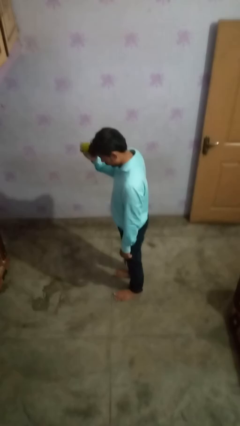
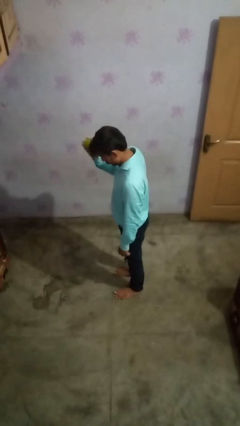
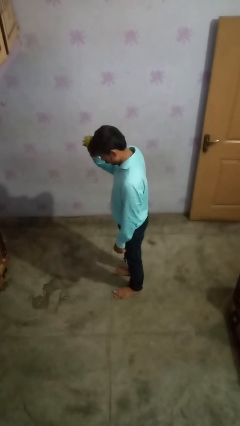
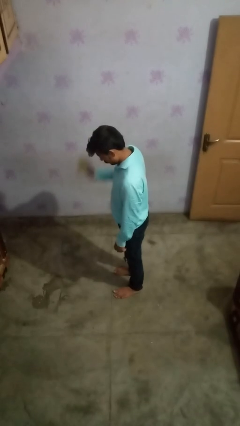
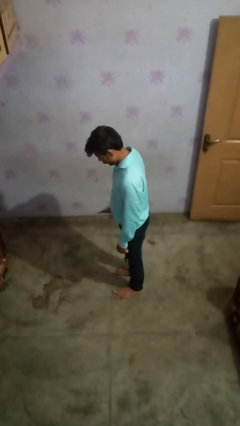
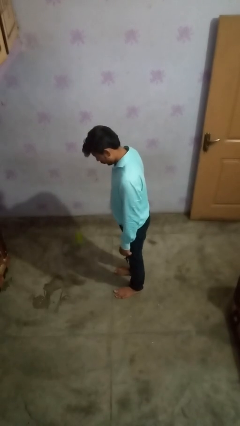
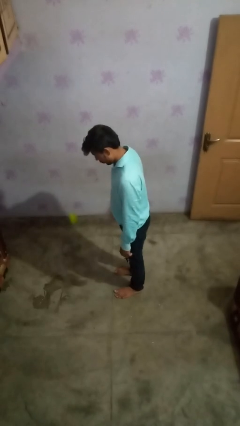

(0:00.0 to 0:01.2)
person bounces ball on floor

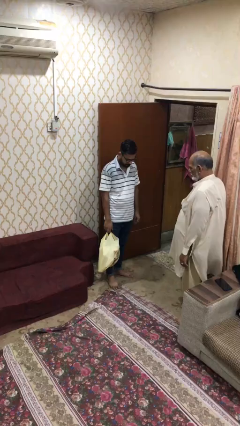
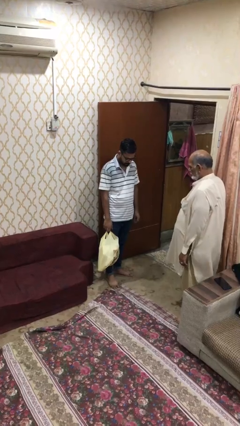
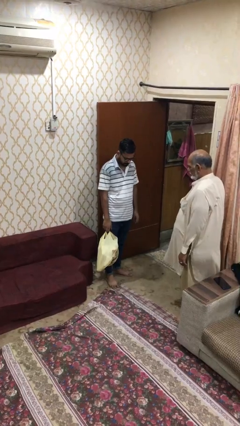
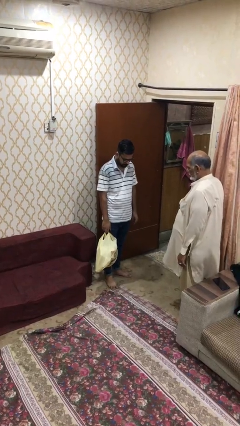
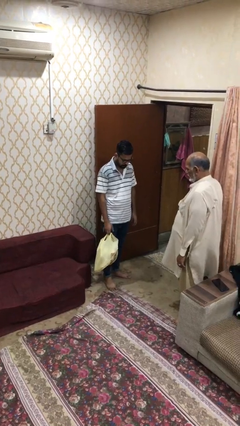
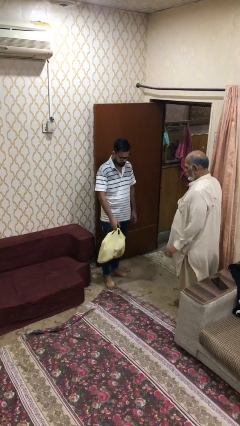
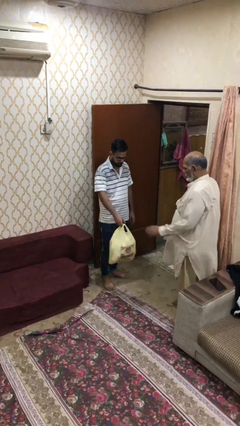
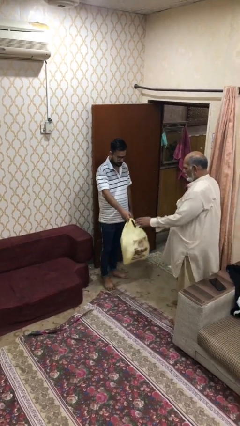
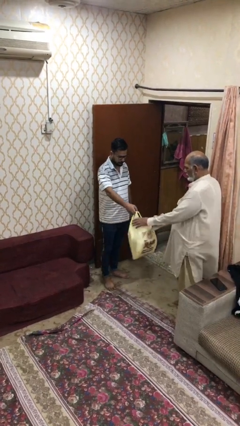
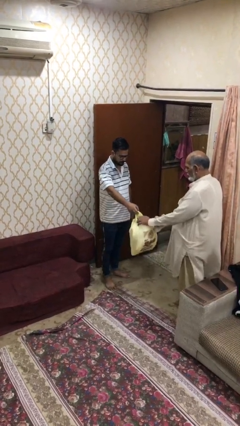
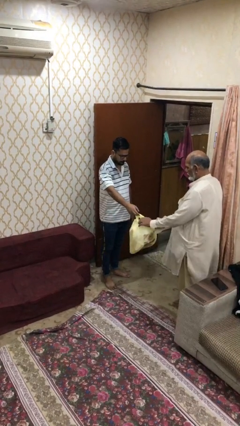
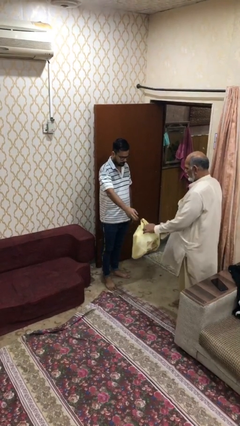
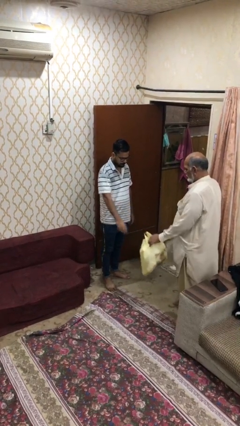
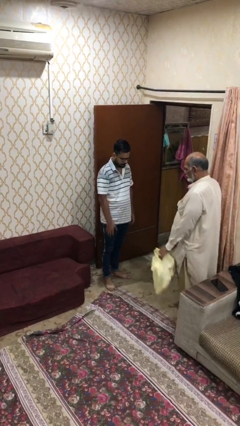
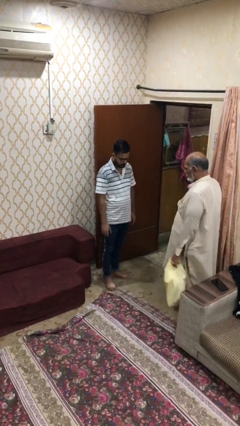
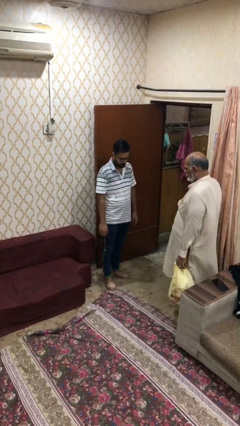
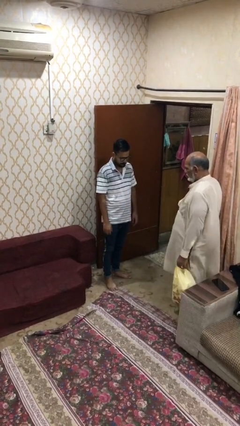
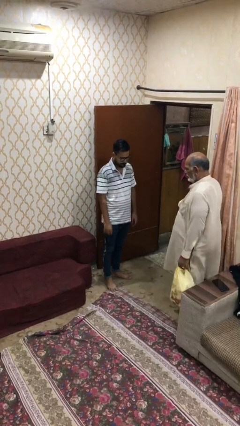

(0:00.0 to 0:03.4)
person transfers object to person

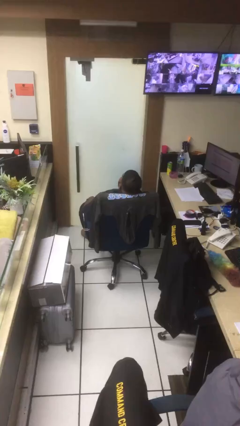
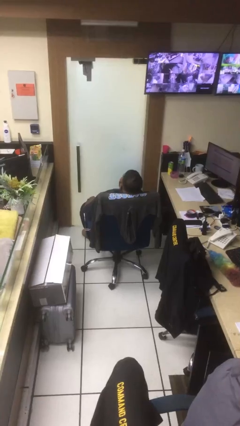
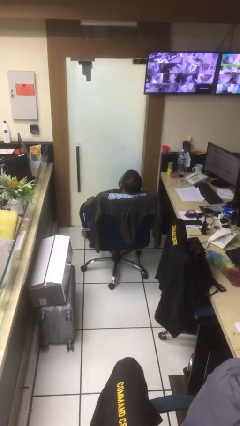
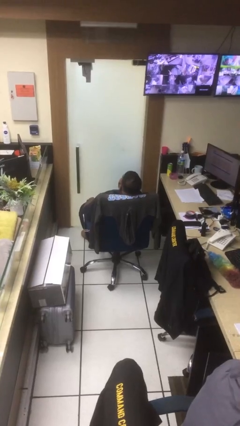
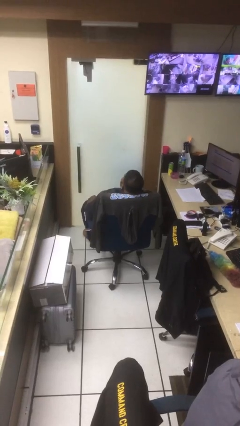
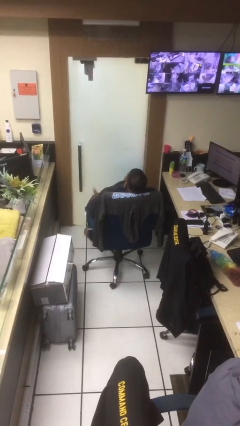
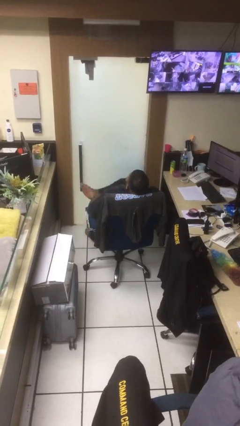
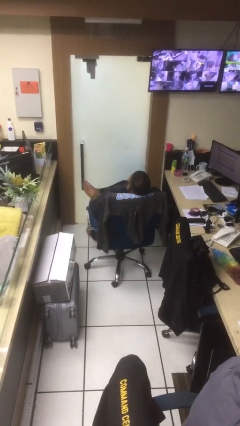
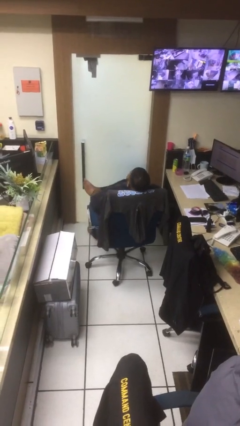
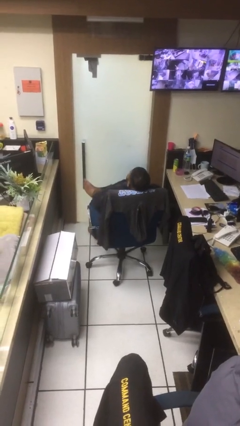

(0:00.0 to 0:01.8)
person crosses legs

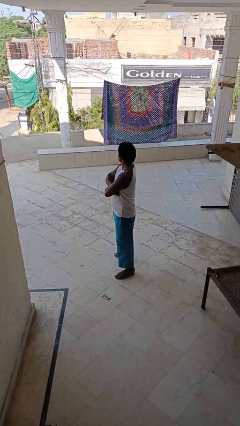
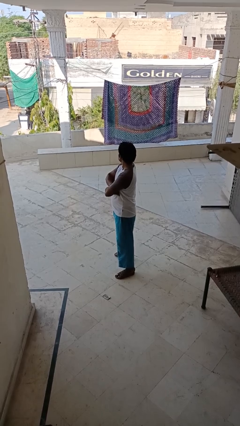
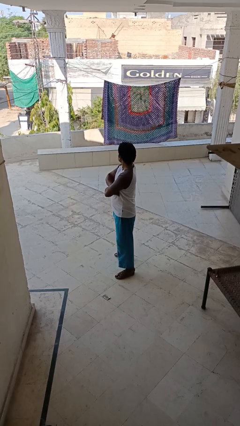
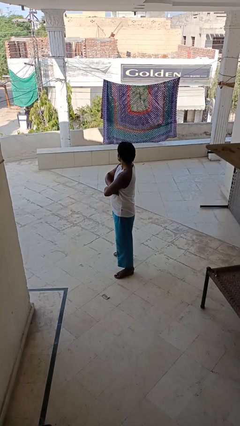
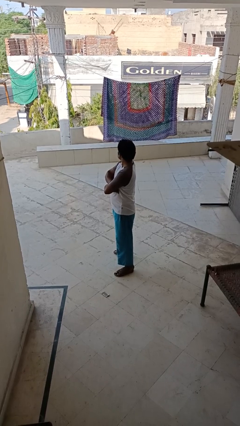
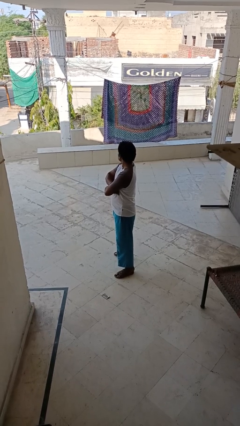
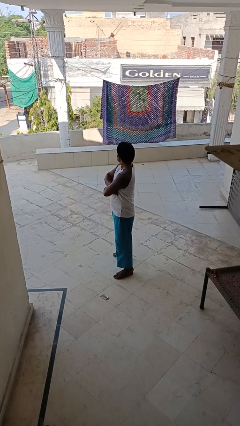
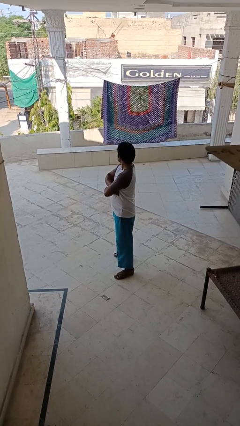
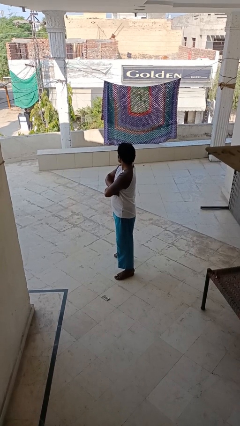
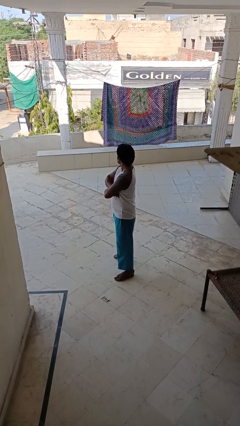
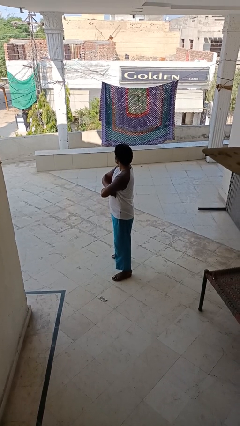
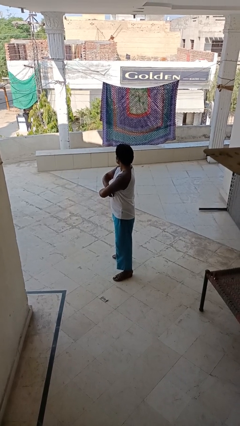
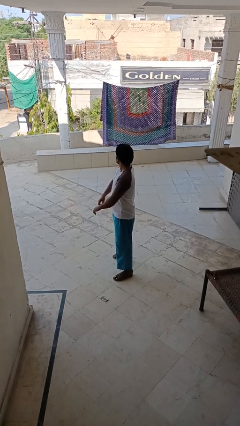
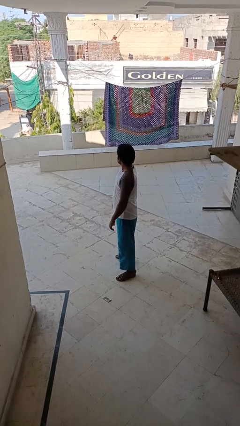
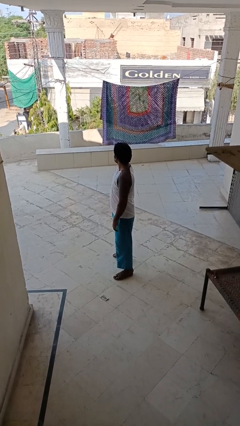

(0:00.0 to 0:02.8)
person crosses arms

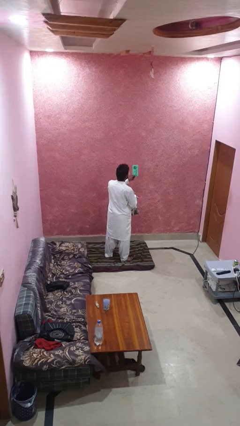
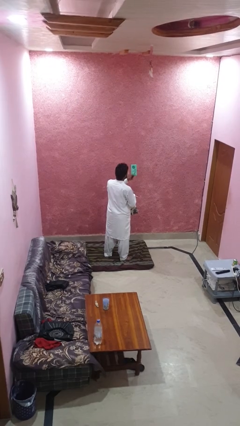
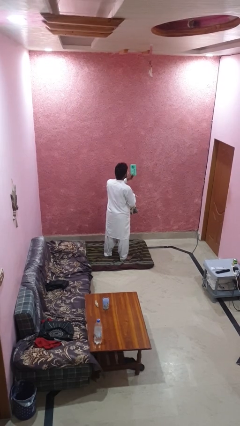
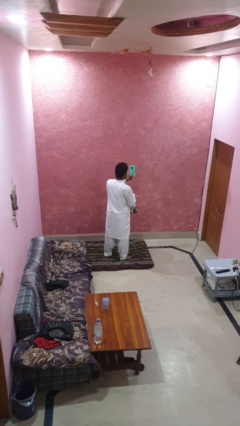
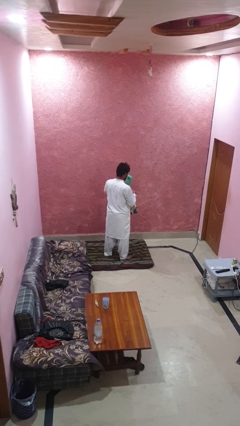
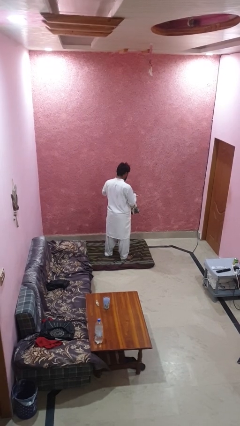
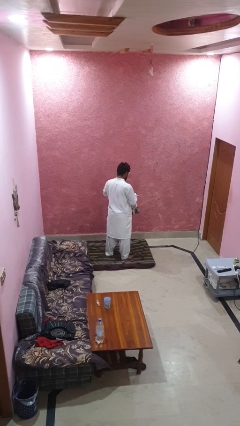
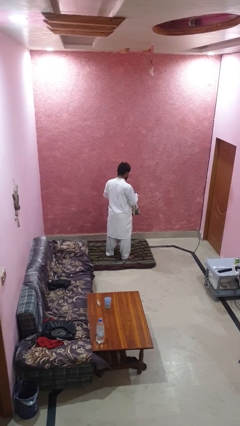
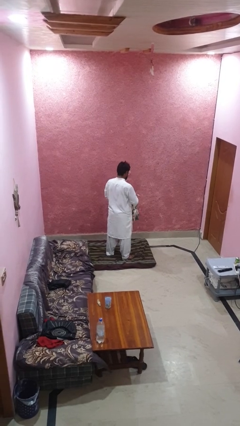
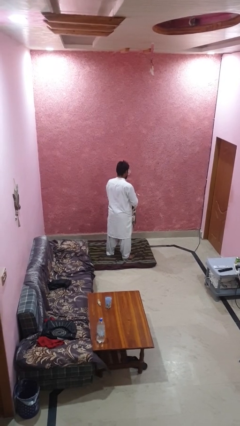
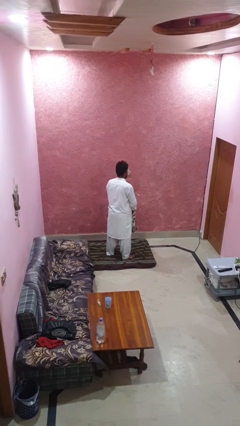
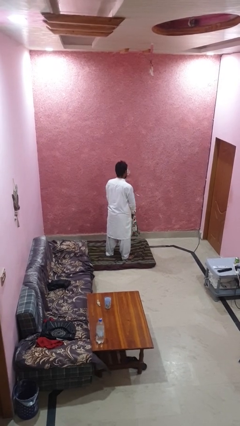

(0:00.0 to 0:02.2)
person puts object into backpack

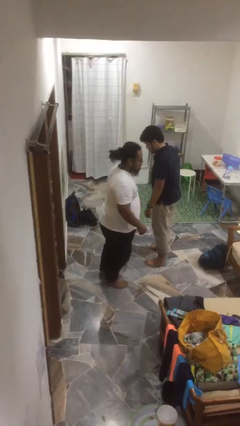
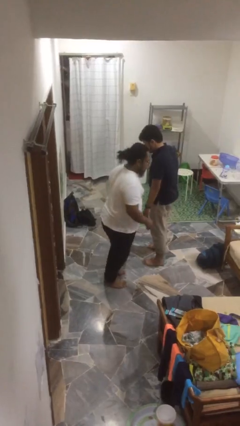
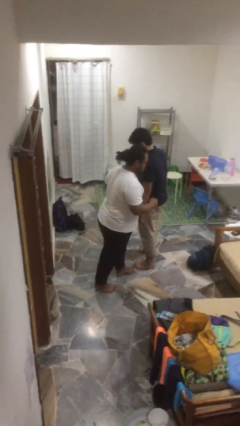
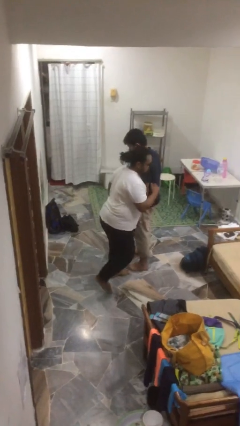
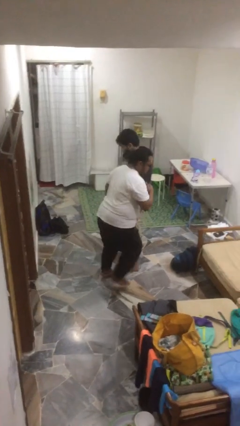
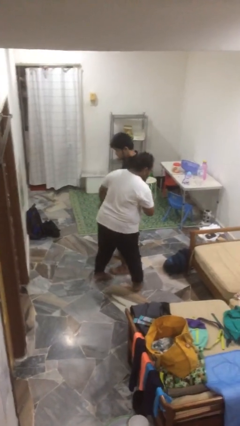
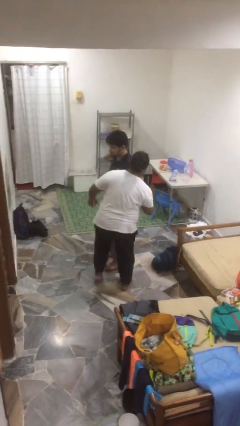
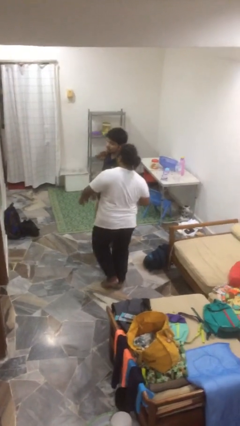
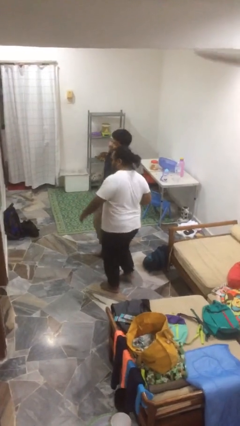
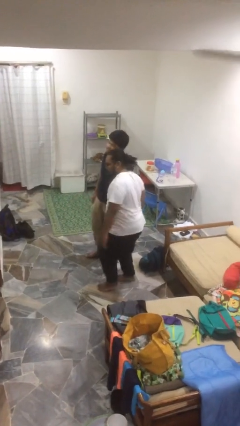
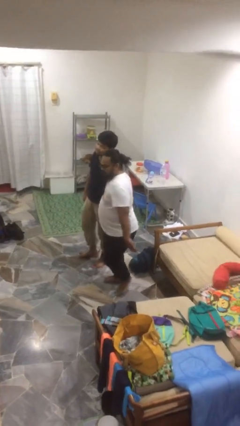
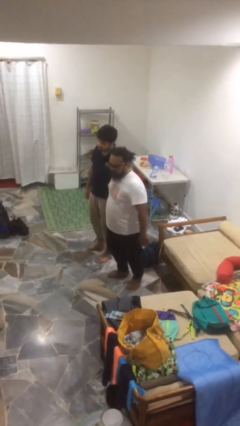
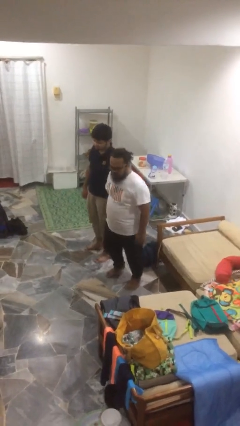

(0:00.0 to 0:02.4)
person bumps into person

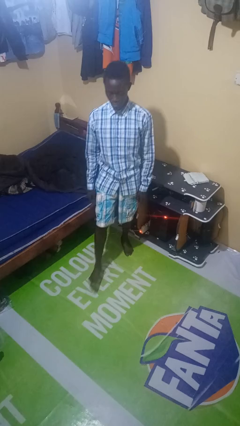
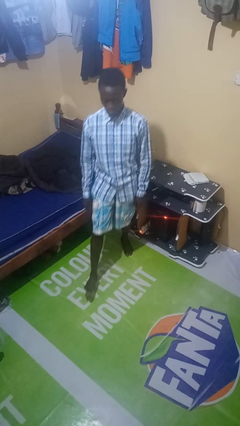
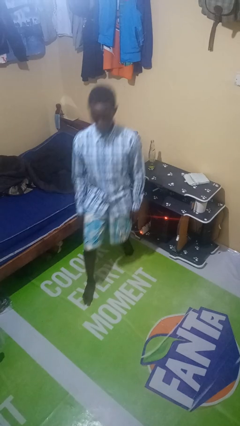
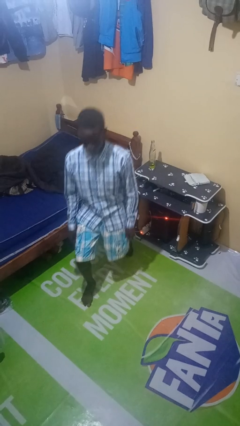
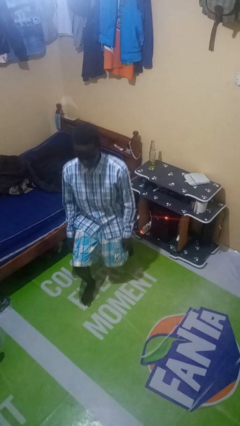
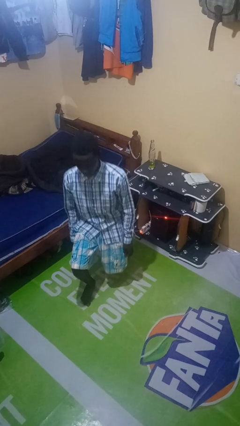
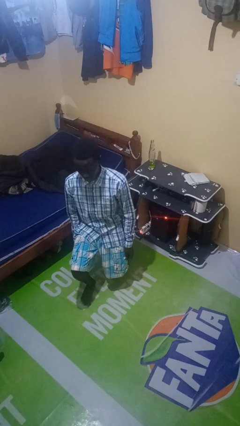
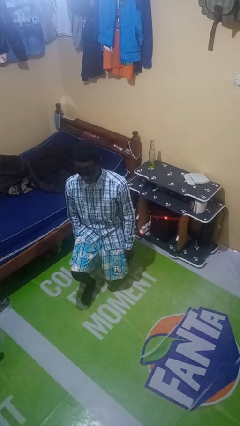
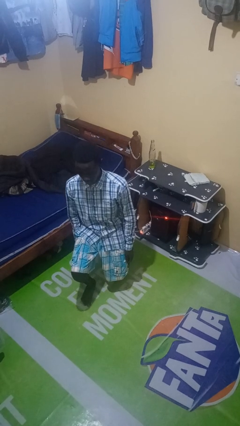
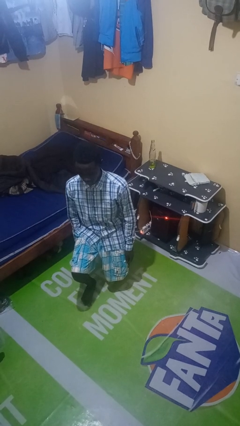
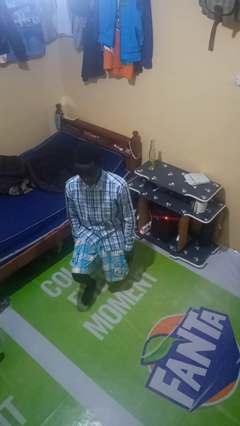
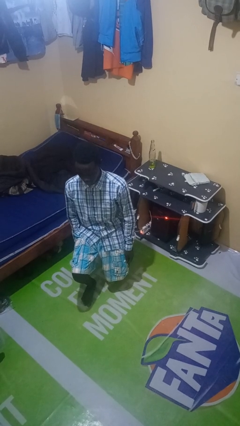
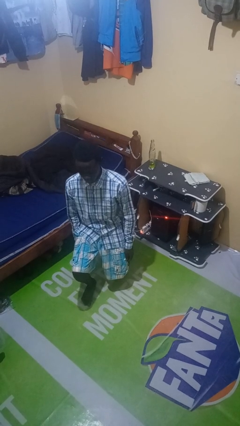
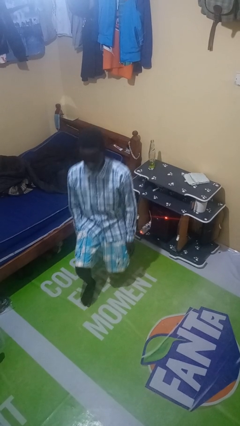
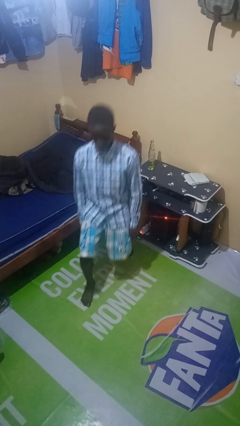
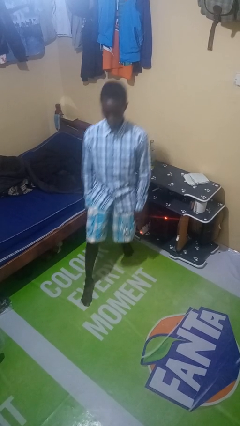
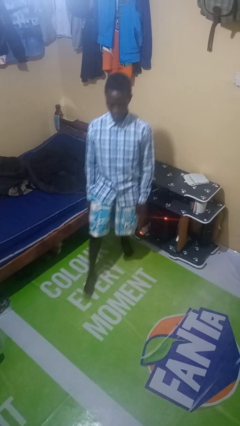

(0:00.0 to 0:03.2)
person exercises with lunges

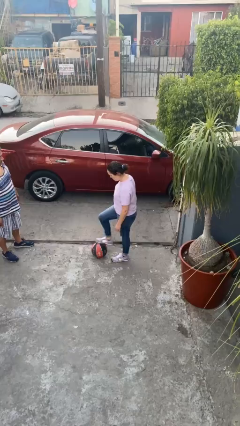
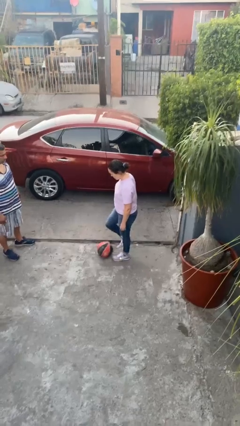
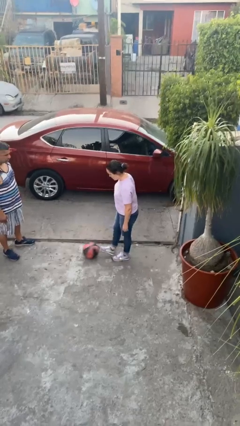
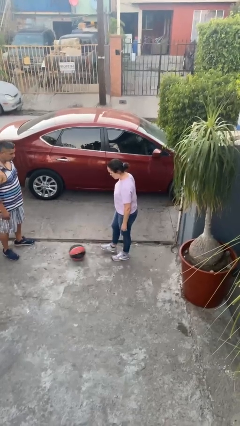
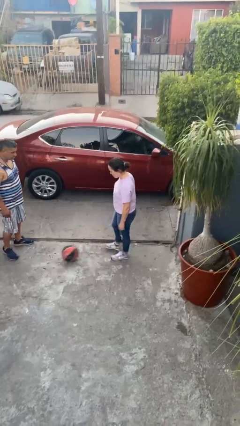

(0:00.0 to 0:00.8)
person kicks object to person
